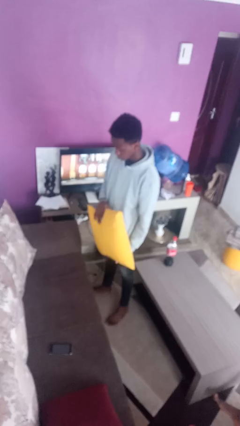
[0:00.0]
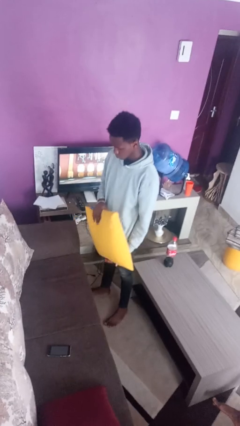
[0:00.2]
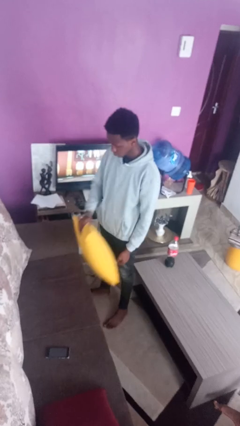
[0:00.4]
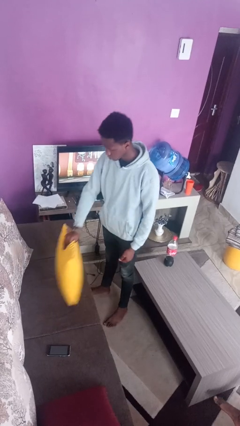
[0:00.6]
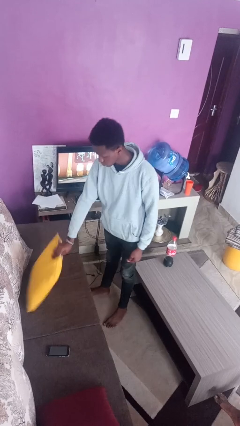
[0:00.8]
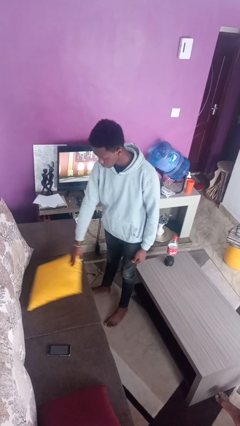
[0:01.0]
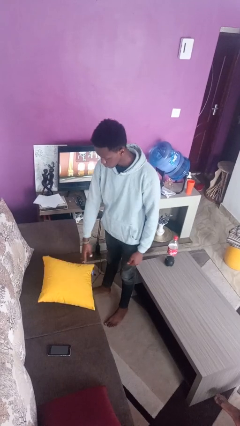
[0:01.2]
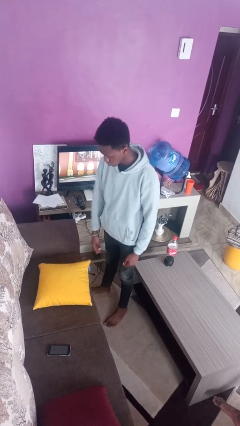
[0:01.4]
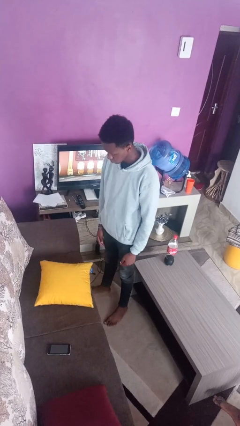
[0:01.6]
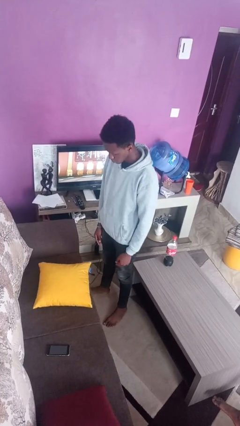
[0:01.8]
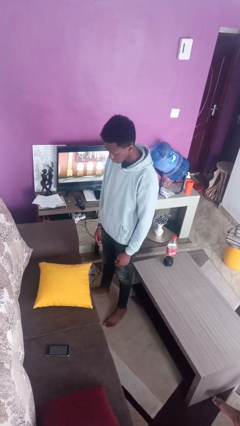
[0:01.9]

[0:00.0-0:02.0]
person puts down object on couch

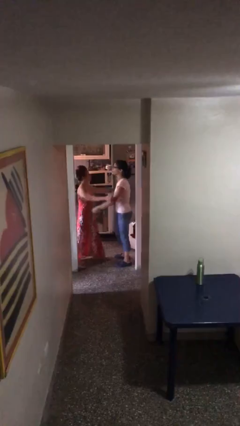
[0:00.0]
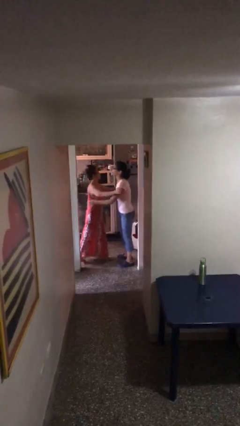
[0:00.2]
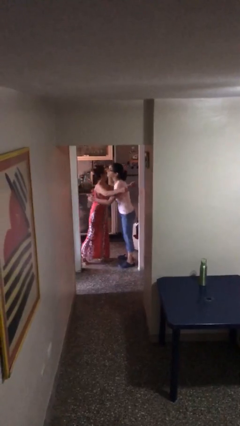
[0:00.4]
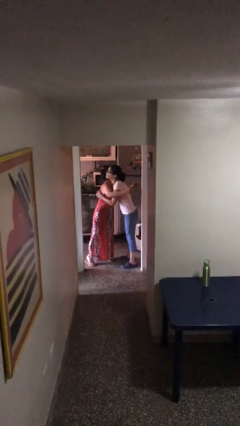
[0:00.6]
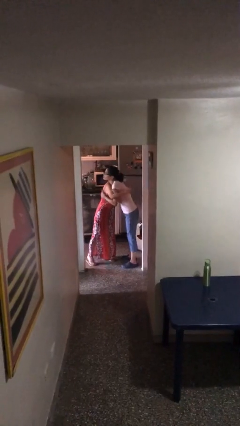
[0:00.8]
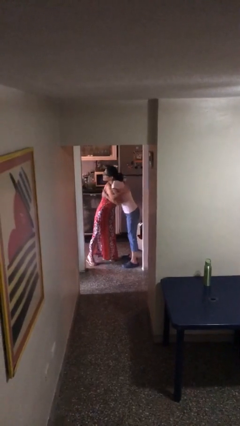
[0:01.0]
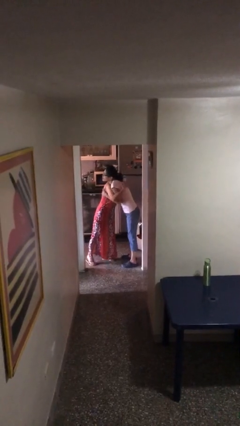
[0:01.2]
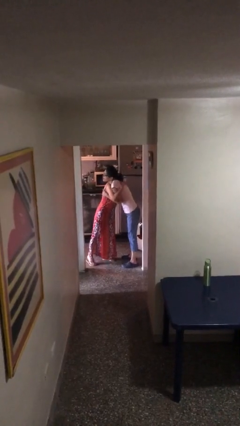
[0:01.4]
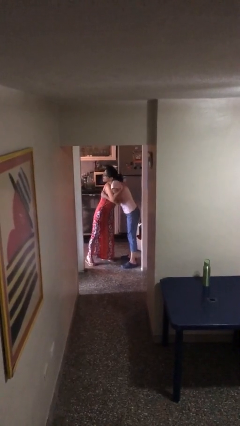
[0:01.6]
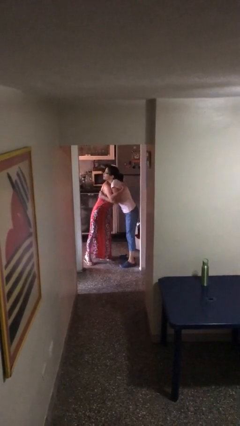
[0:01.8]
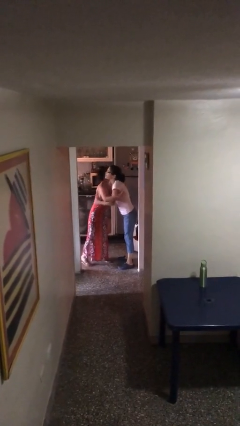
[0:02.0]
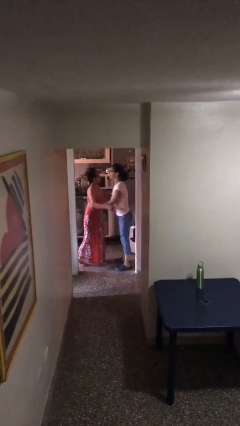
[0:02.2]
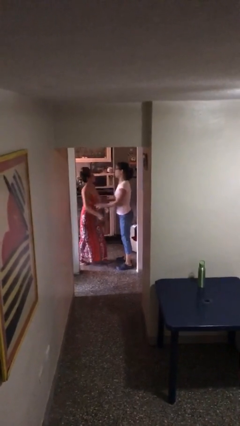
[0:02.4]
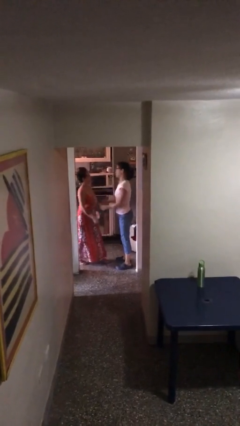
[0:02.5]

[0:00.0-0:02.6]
person embraces person

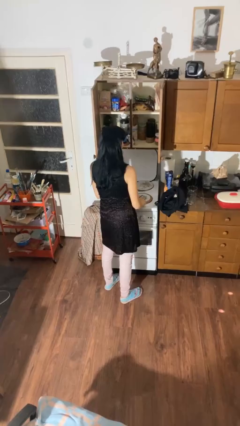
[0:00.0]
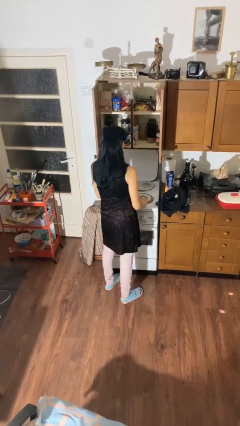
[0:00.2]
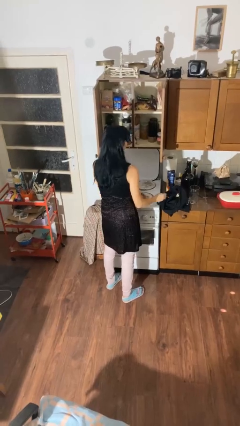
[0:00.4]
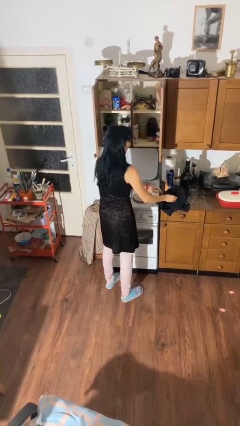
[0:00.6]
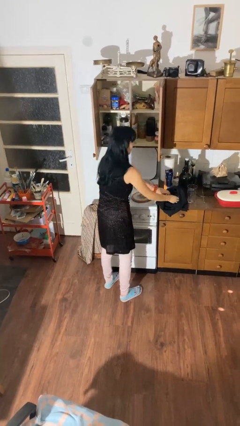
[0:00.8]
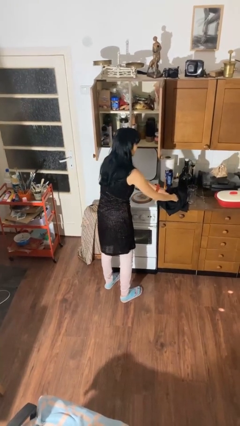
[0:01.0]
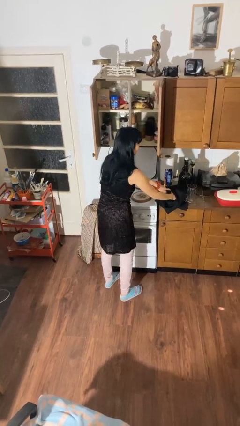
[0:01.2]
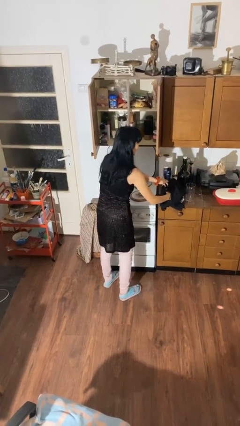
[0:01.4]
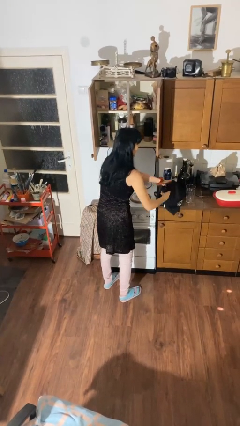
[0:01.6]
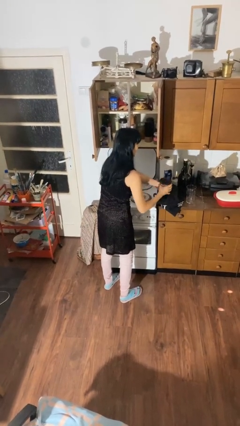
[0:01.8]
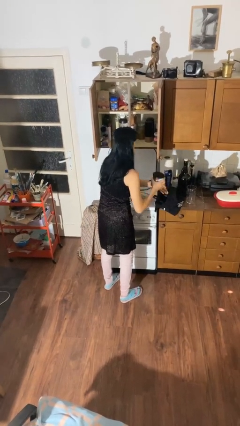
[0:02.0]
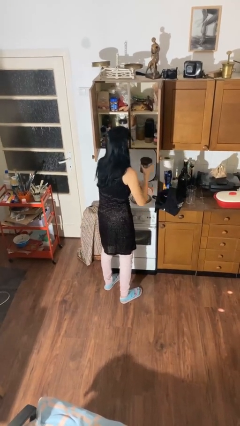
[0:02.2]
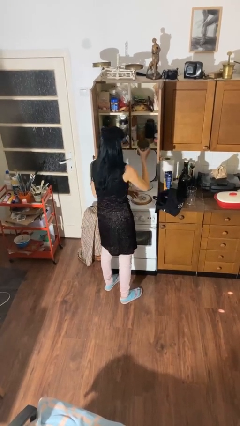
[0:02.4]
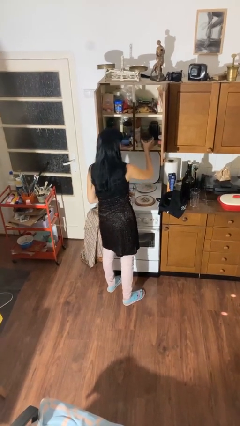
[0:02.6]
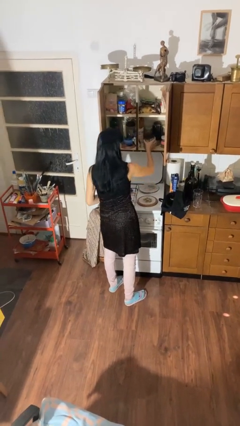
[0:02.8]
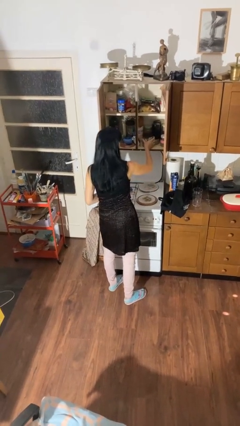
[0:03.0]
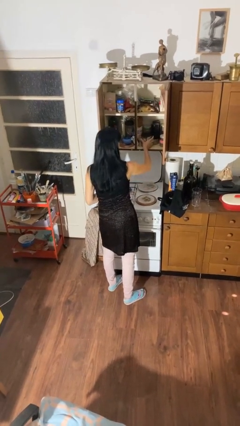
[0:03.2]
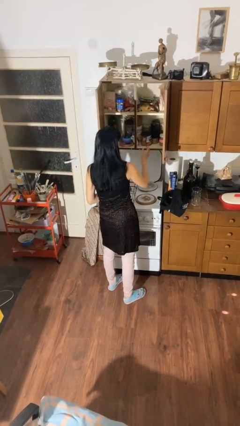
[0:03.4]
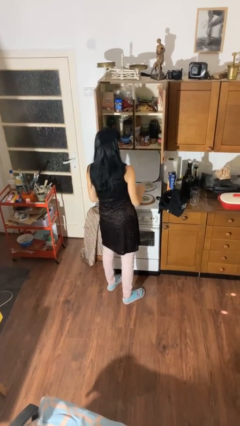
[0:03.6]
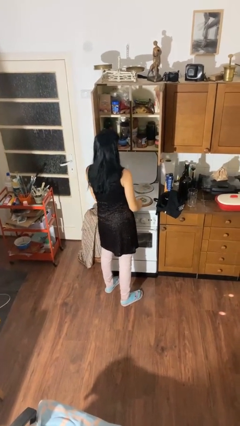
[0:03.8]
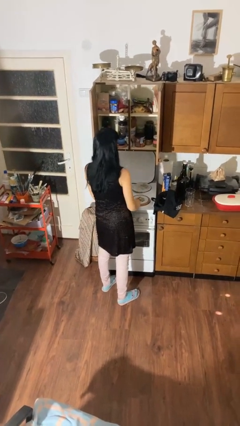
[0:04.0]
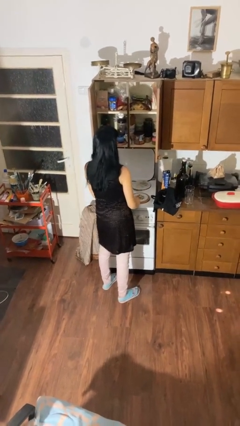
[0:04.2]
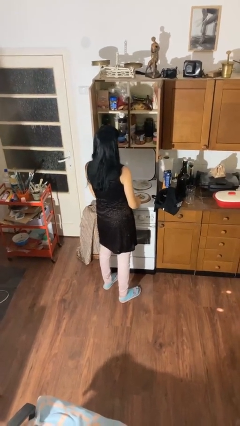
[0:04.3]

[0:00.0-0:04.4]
person loads groceries into cabinet

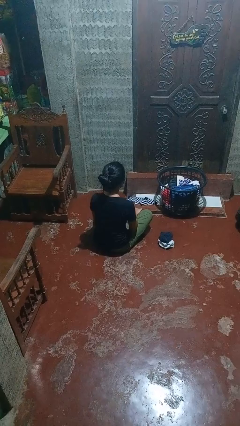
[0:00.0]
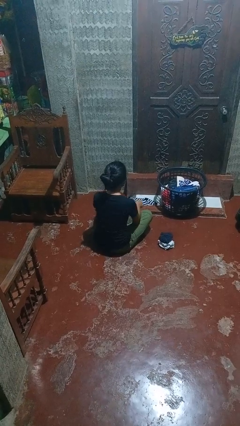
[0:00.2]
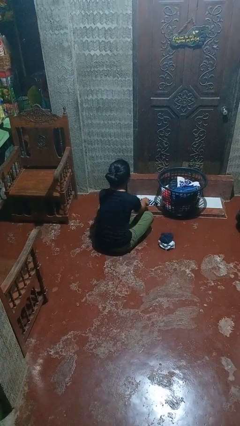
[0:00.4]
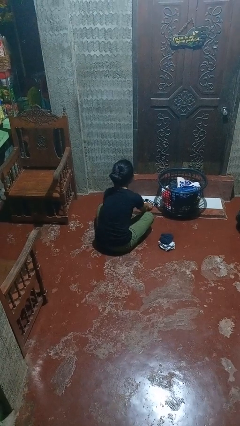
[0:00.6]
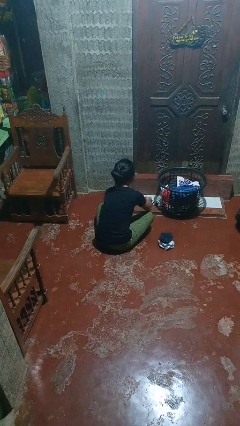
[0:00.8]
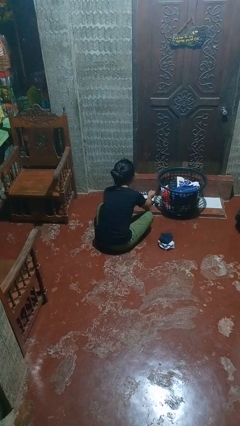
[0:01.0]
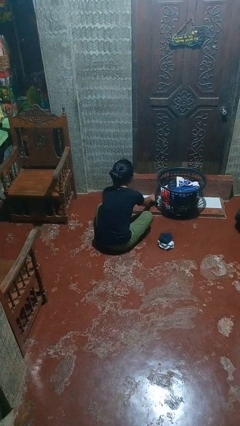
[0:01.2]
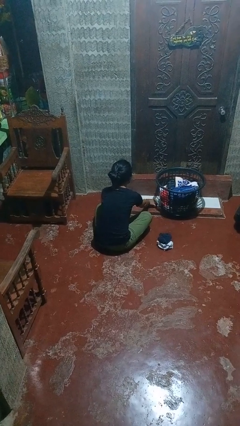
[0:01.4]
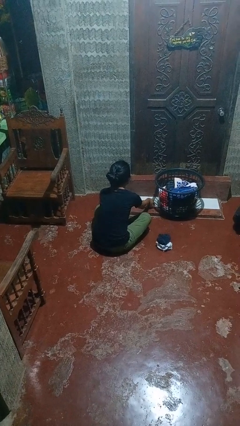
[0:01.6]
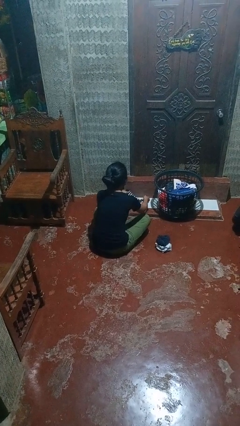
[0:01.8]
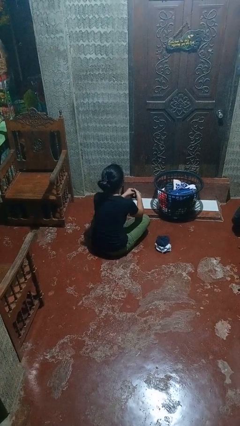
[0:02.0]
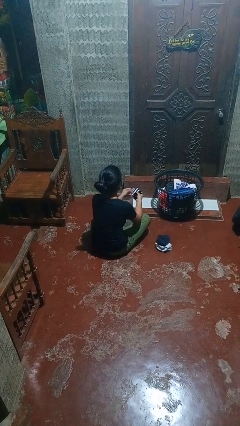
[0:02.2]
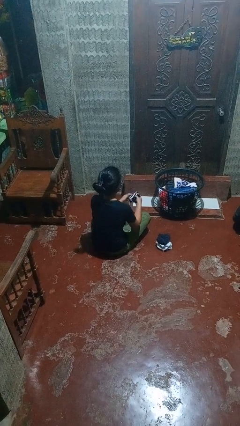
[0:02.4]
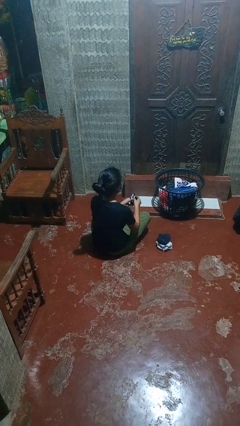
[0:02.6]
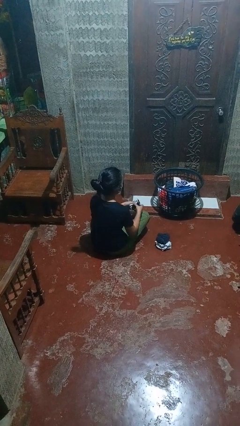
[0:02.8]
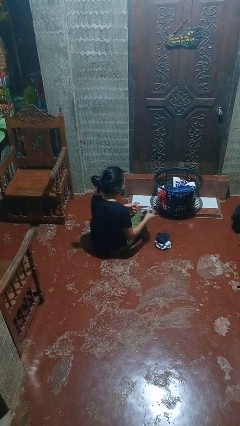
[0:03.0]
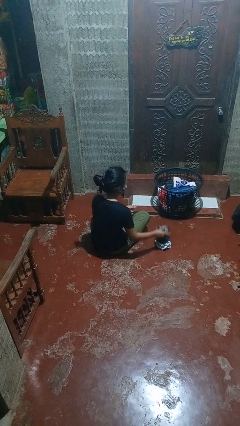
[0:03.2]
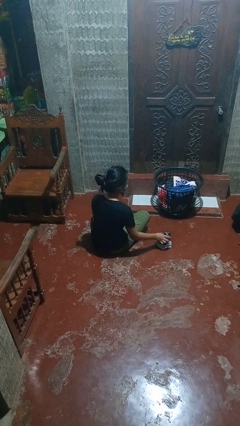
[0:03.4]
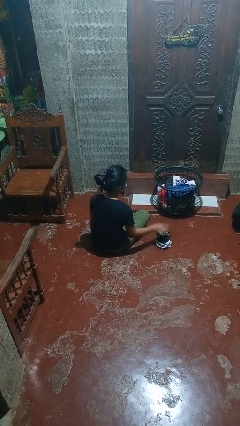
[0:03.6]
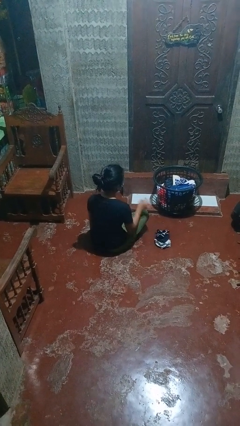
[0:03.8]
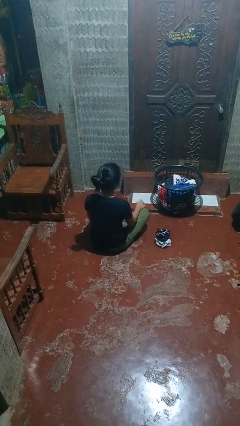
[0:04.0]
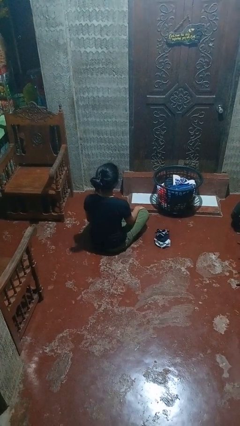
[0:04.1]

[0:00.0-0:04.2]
person folds socks

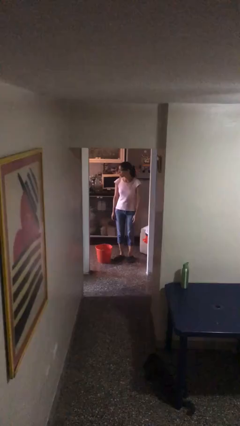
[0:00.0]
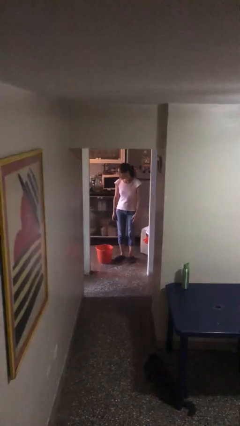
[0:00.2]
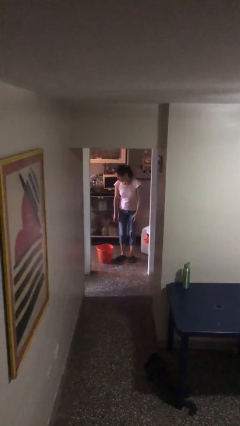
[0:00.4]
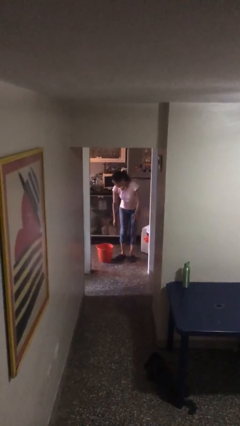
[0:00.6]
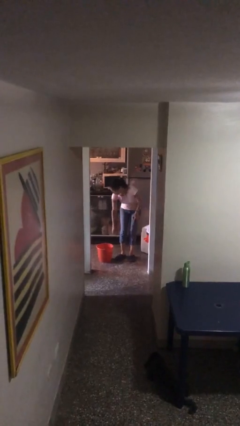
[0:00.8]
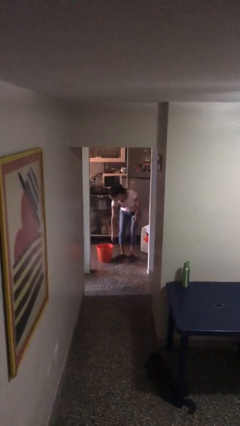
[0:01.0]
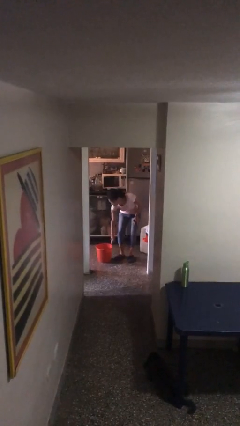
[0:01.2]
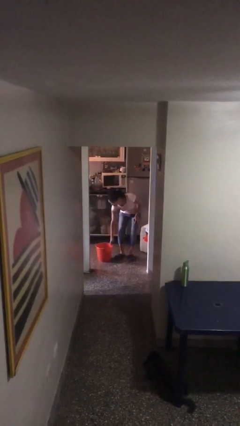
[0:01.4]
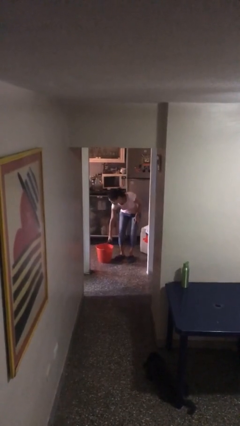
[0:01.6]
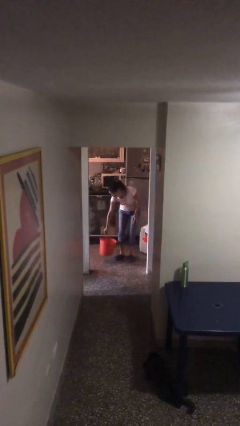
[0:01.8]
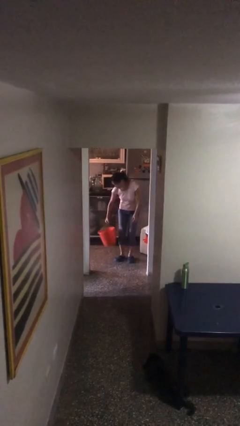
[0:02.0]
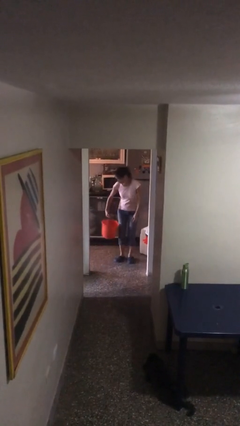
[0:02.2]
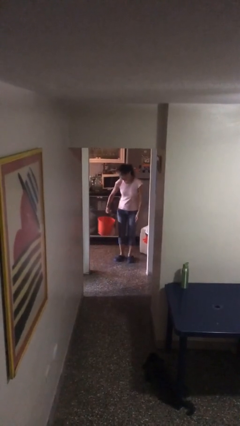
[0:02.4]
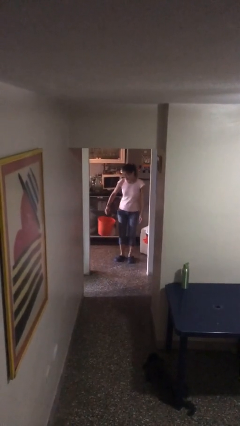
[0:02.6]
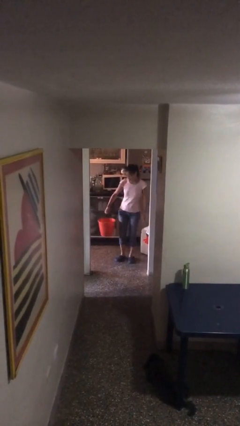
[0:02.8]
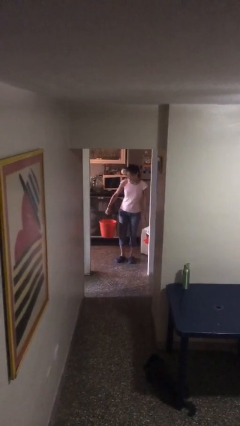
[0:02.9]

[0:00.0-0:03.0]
person picks up object from floor

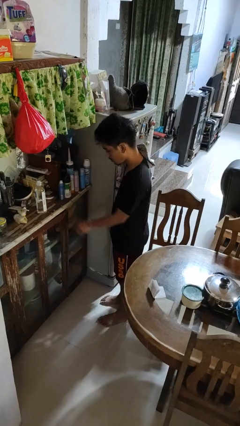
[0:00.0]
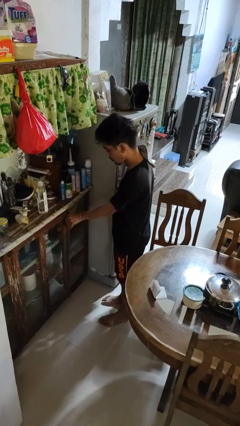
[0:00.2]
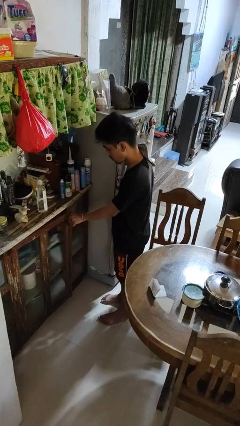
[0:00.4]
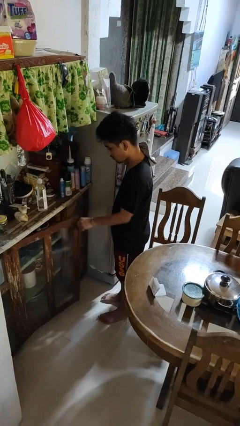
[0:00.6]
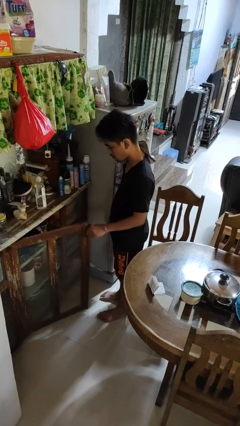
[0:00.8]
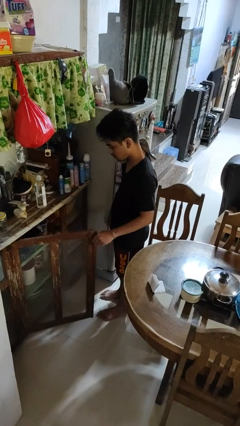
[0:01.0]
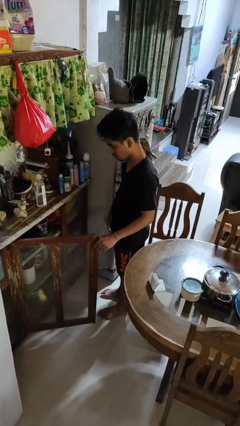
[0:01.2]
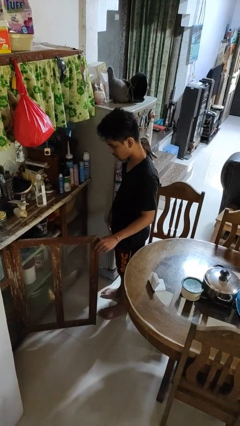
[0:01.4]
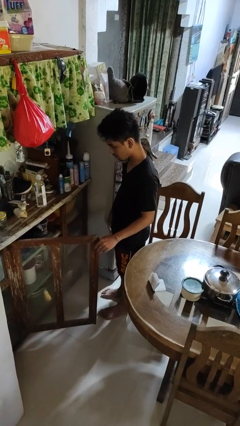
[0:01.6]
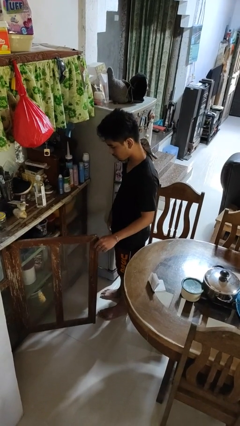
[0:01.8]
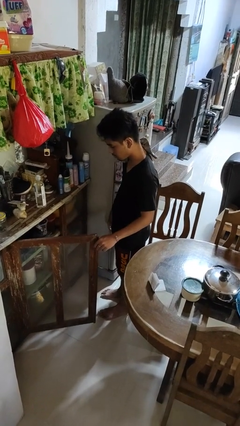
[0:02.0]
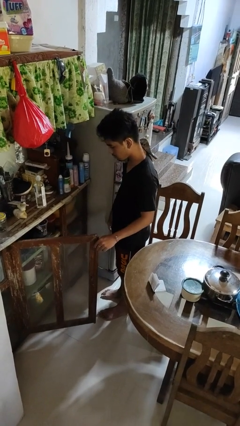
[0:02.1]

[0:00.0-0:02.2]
person opens cabinet
